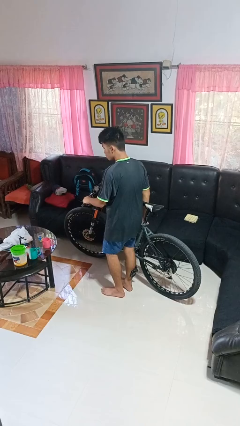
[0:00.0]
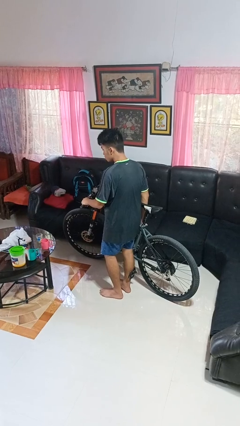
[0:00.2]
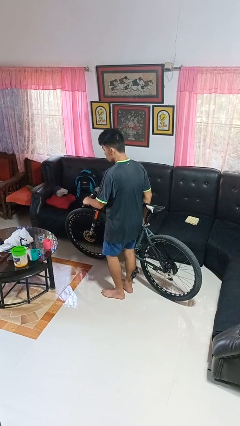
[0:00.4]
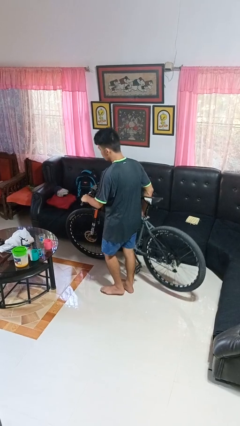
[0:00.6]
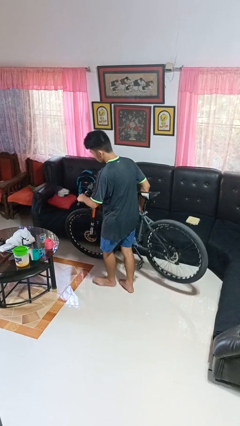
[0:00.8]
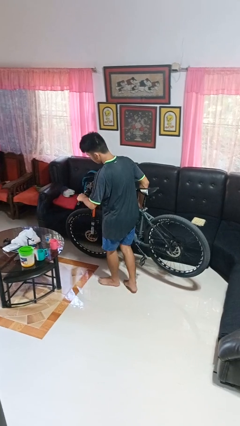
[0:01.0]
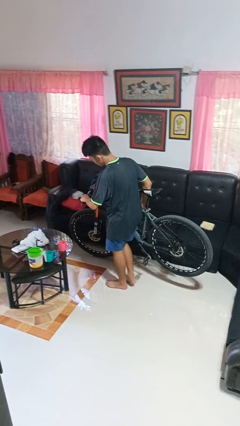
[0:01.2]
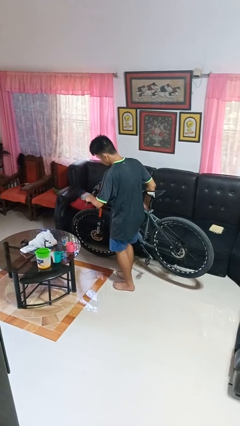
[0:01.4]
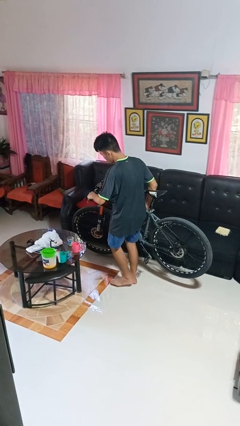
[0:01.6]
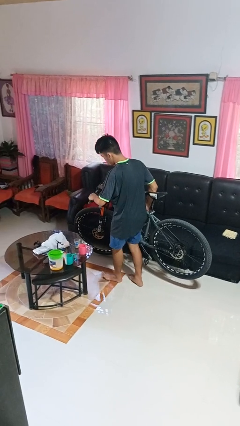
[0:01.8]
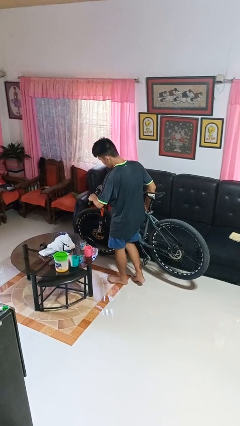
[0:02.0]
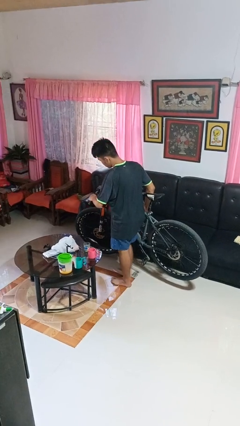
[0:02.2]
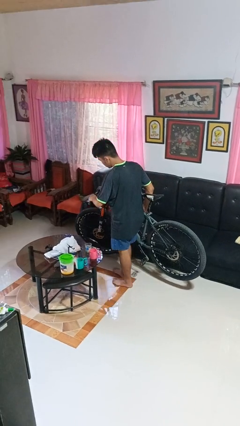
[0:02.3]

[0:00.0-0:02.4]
person carries bicycle

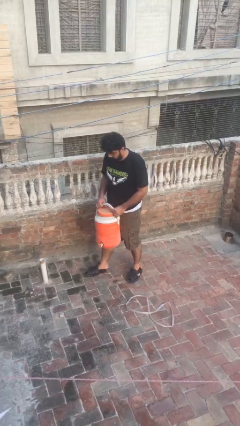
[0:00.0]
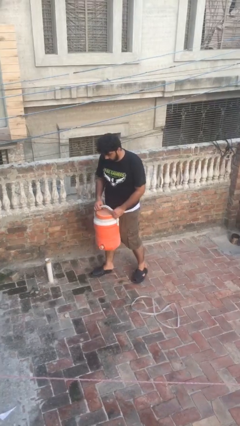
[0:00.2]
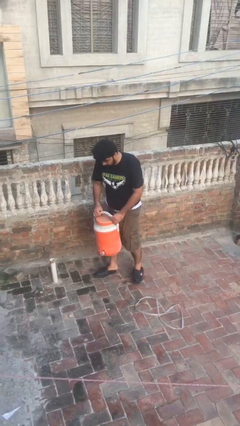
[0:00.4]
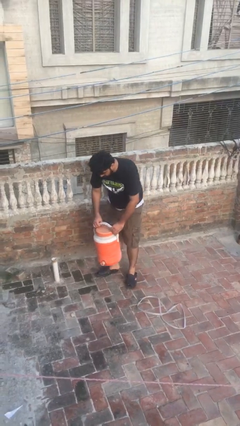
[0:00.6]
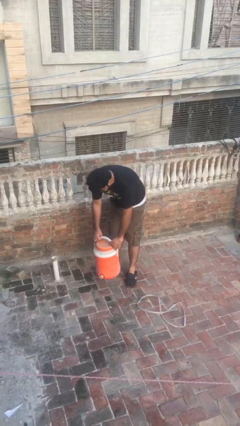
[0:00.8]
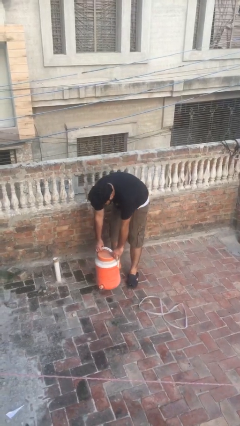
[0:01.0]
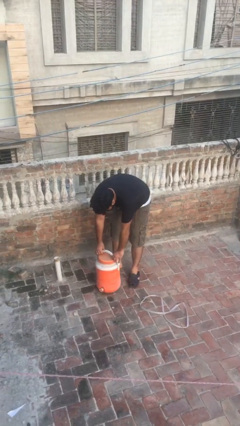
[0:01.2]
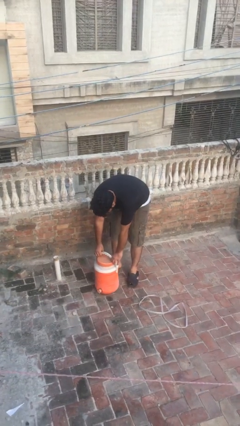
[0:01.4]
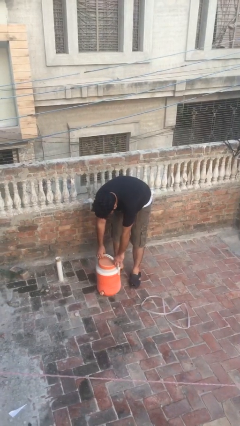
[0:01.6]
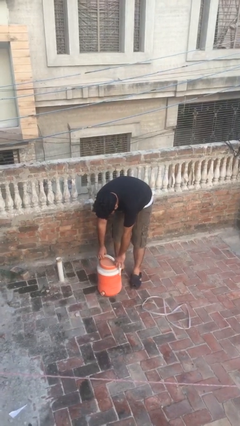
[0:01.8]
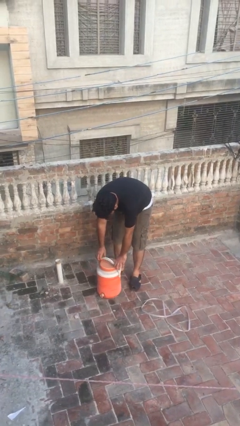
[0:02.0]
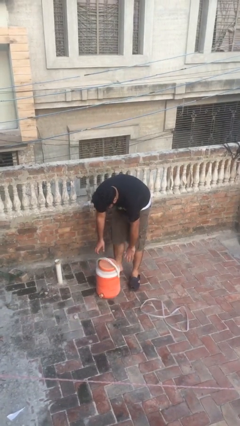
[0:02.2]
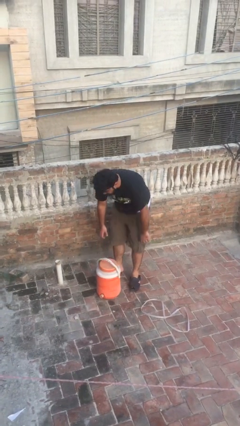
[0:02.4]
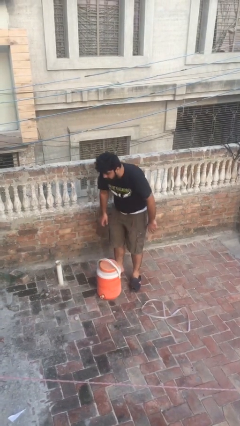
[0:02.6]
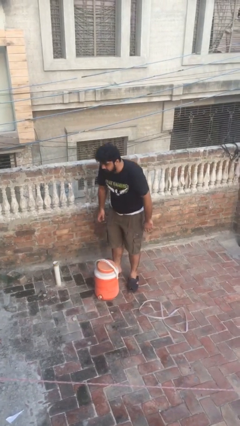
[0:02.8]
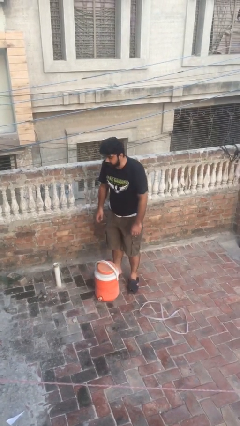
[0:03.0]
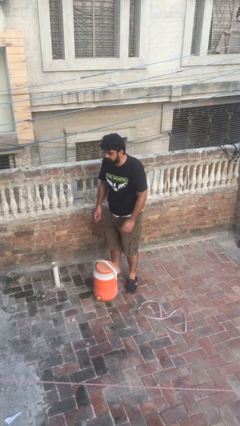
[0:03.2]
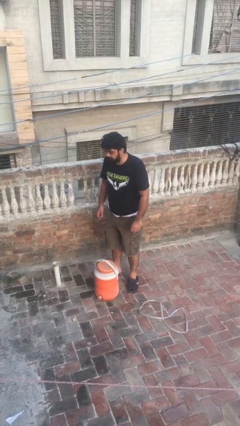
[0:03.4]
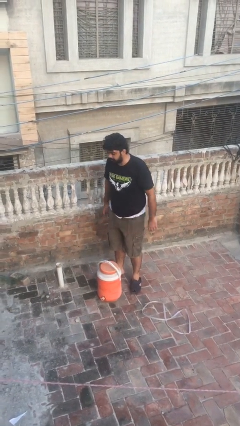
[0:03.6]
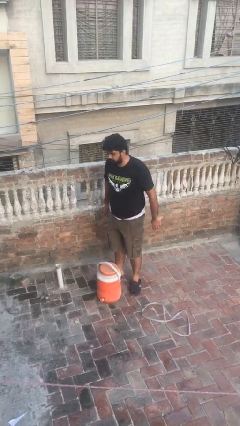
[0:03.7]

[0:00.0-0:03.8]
person puts down object on floor

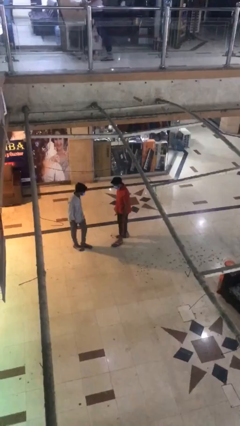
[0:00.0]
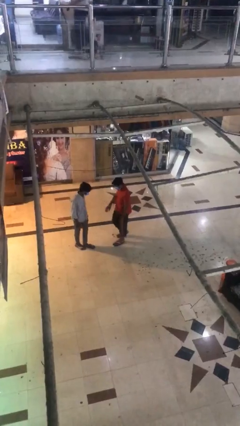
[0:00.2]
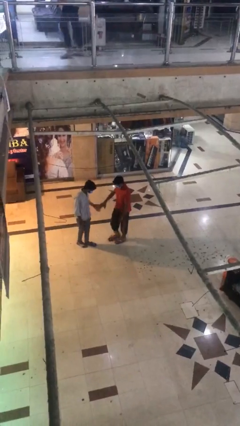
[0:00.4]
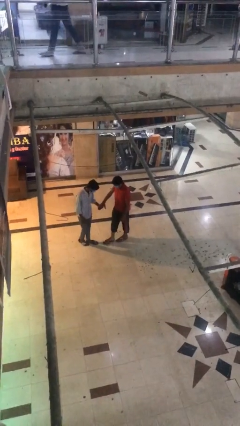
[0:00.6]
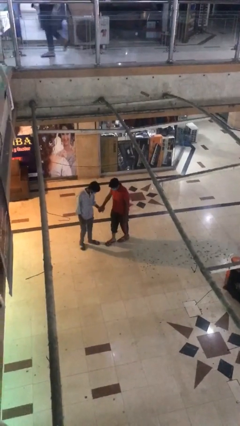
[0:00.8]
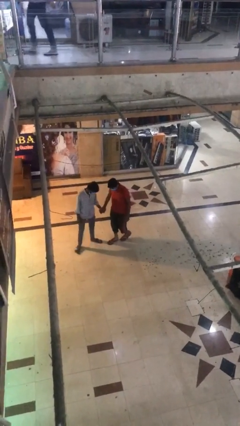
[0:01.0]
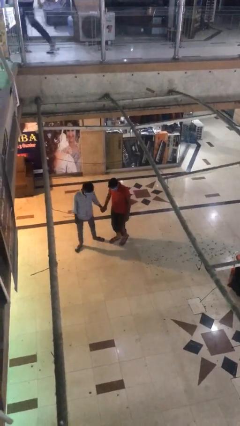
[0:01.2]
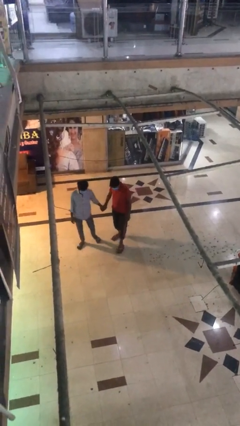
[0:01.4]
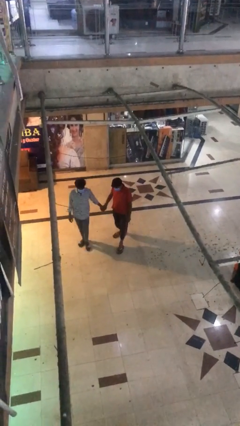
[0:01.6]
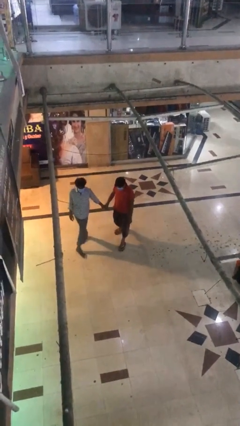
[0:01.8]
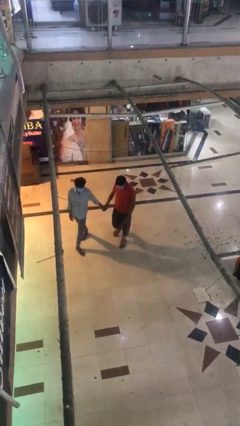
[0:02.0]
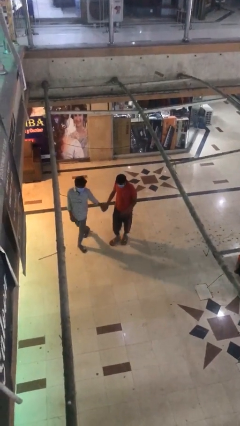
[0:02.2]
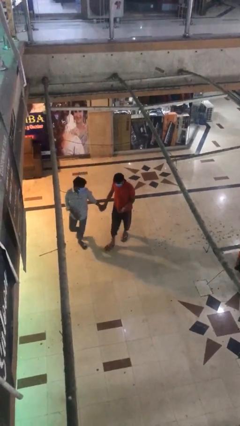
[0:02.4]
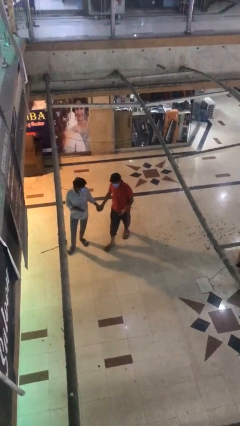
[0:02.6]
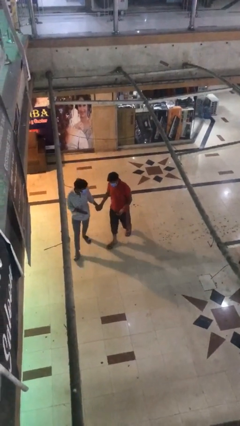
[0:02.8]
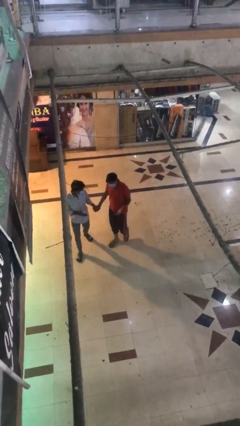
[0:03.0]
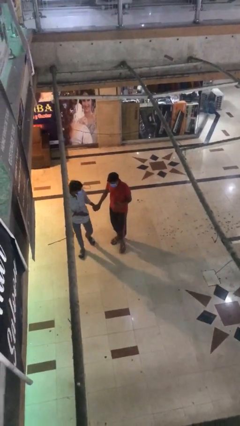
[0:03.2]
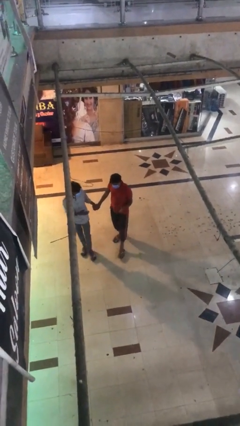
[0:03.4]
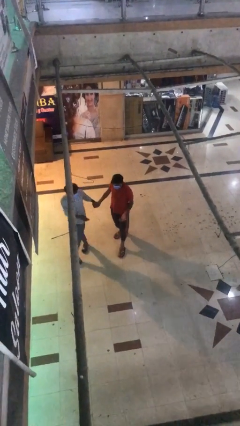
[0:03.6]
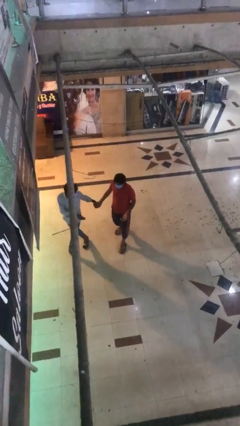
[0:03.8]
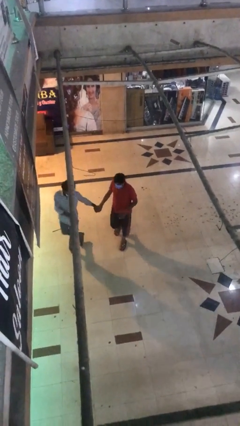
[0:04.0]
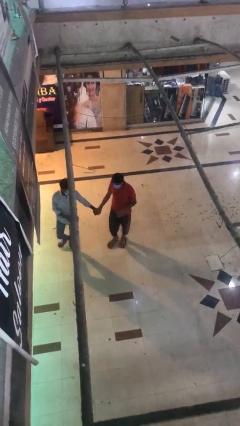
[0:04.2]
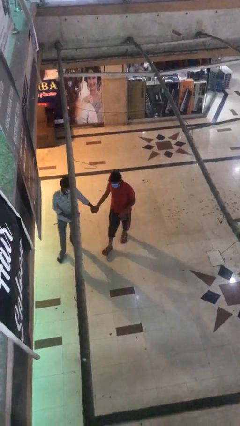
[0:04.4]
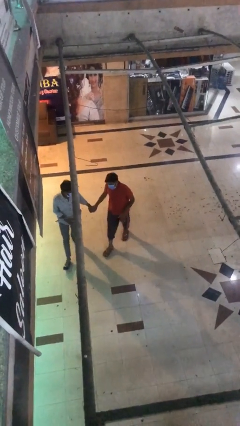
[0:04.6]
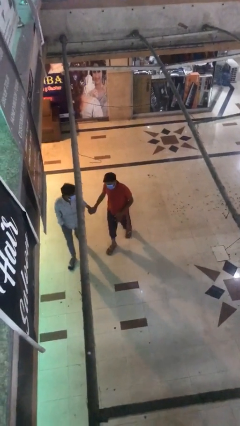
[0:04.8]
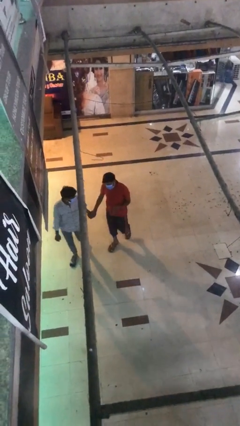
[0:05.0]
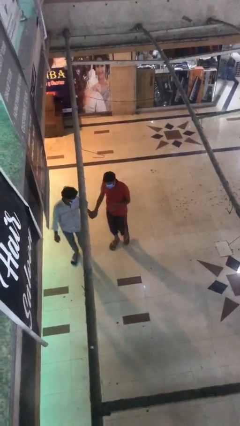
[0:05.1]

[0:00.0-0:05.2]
person holds hand

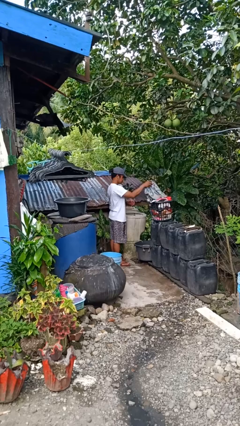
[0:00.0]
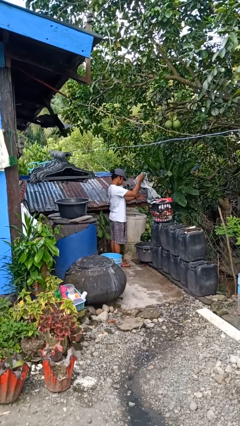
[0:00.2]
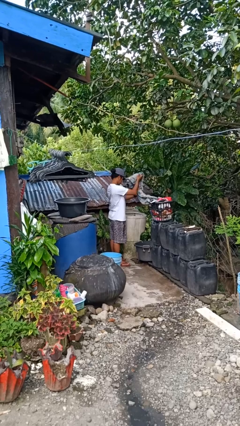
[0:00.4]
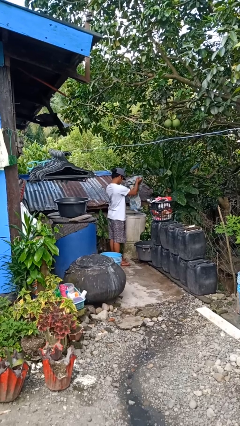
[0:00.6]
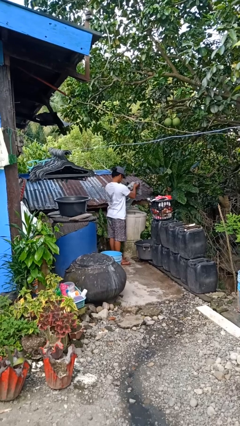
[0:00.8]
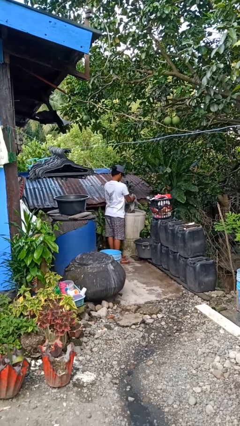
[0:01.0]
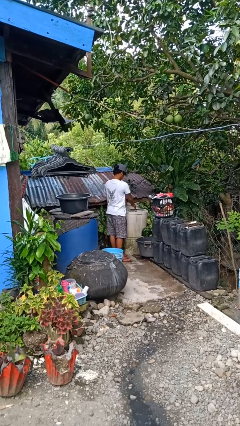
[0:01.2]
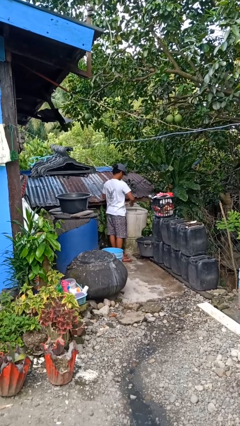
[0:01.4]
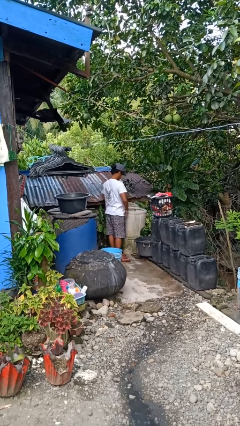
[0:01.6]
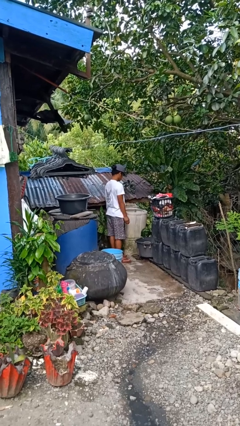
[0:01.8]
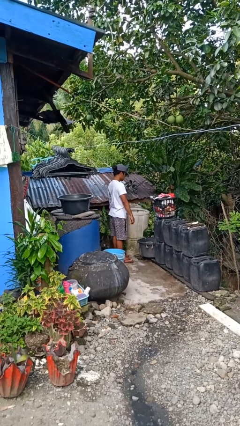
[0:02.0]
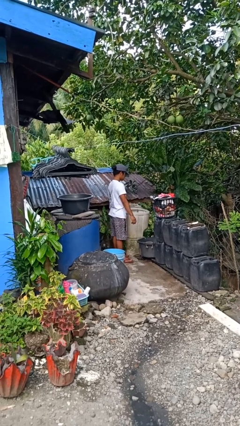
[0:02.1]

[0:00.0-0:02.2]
person loads clotheswasher

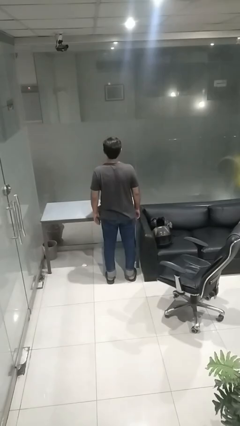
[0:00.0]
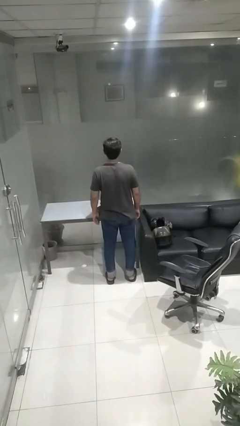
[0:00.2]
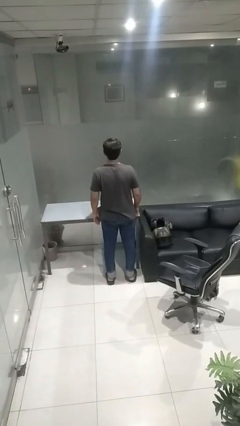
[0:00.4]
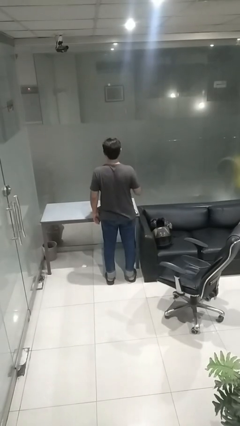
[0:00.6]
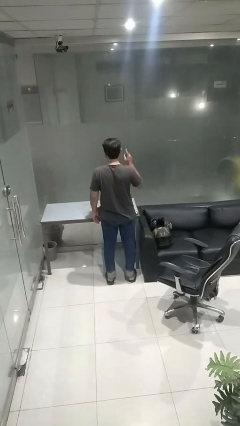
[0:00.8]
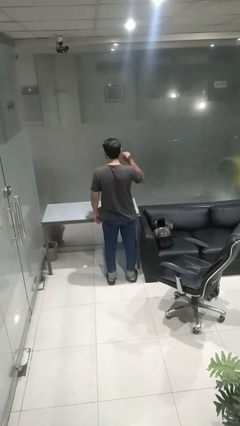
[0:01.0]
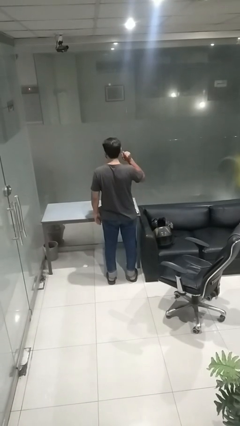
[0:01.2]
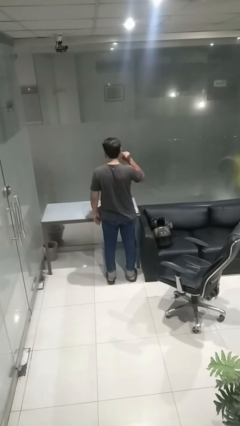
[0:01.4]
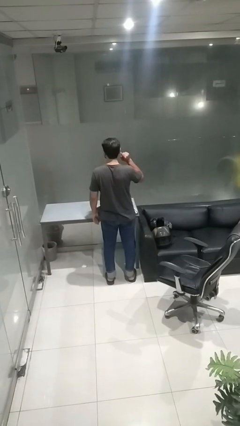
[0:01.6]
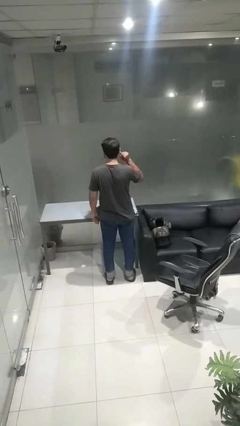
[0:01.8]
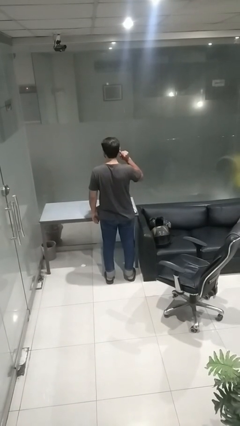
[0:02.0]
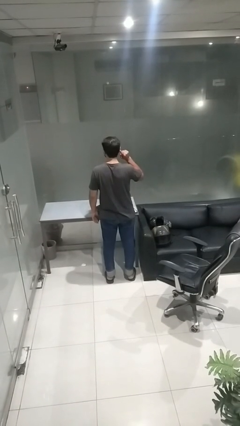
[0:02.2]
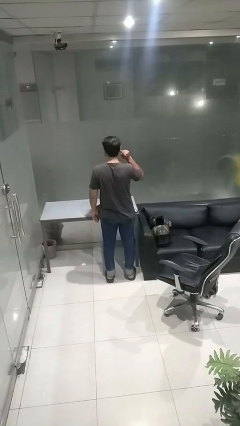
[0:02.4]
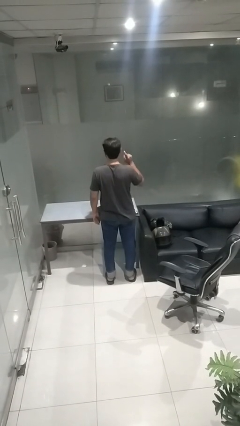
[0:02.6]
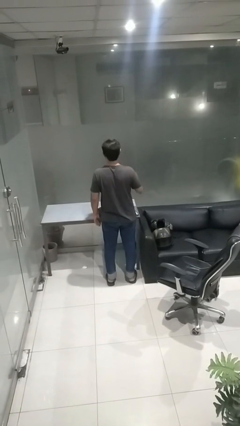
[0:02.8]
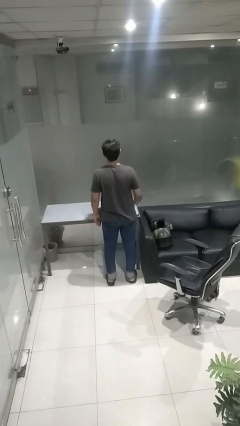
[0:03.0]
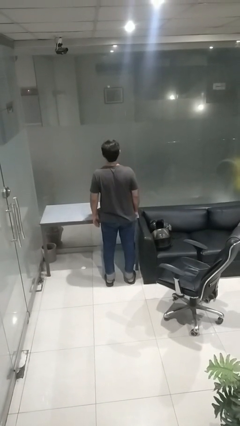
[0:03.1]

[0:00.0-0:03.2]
person gestures listen closely

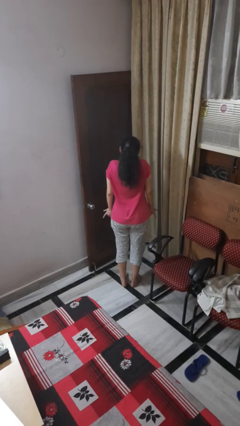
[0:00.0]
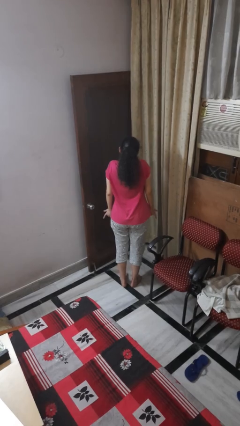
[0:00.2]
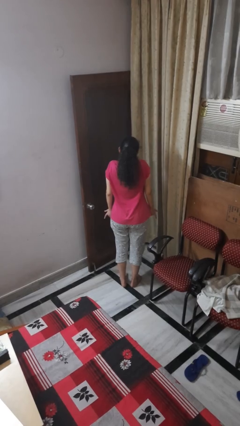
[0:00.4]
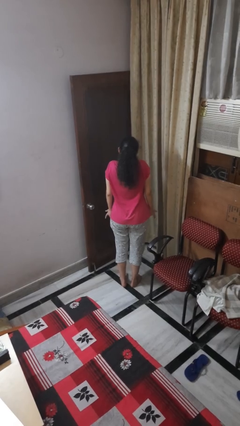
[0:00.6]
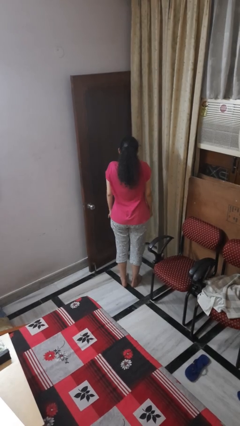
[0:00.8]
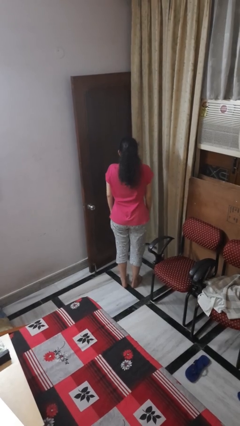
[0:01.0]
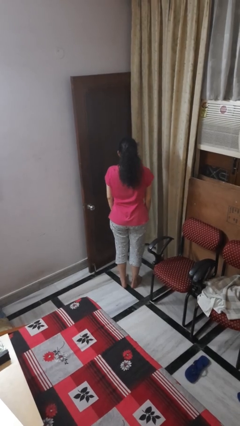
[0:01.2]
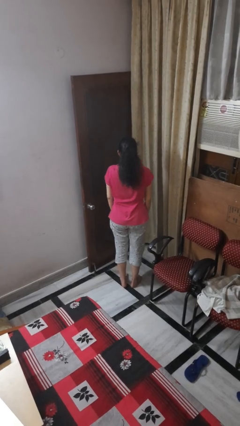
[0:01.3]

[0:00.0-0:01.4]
person shrugs
